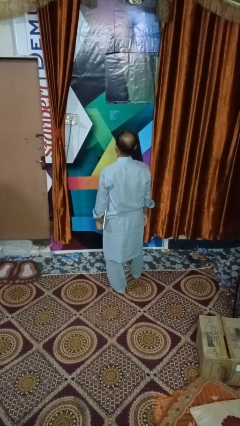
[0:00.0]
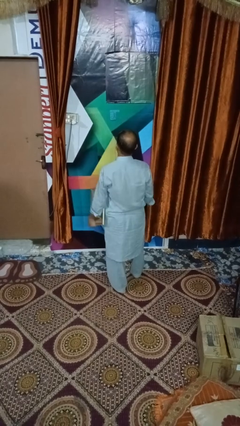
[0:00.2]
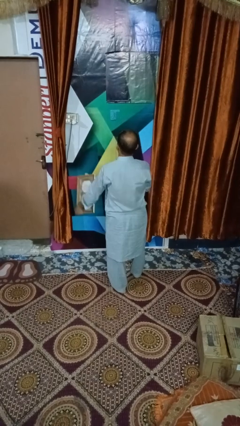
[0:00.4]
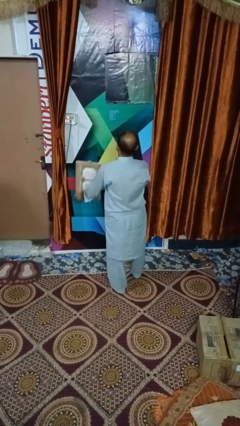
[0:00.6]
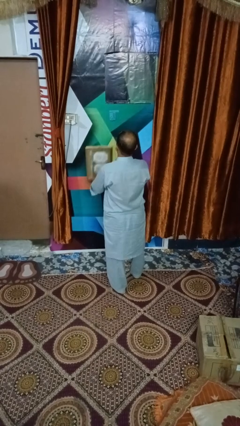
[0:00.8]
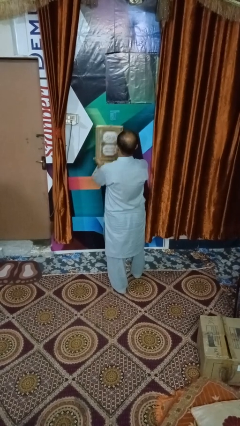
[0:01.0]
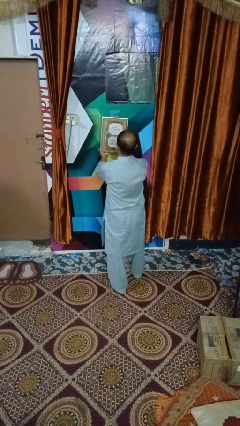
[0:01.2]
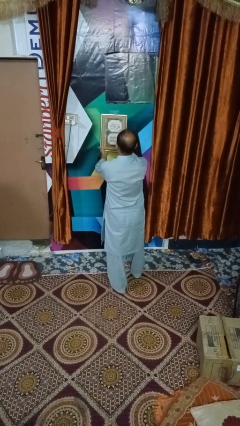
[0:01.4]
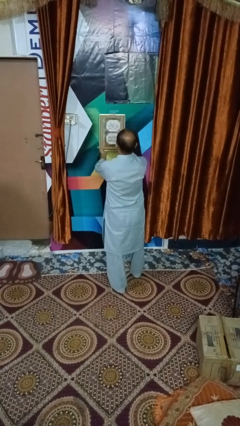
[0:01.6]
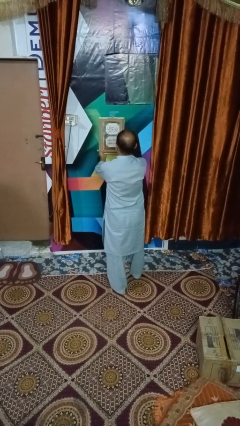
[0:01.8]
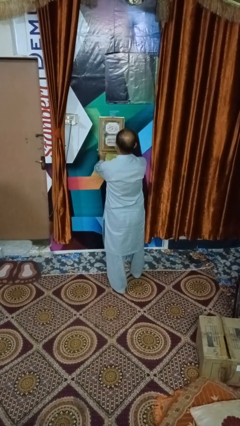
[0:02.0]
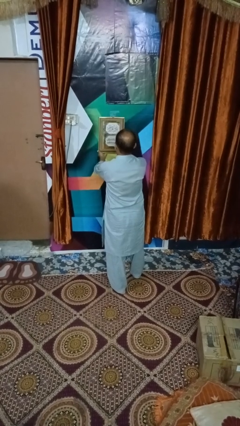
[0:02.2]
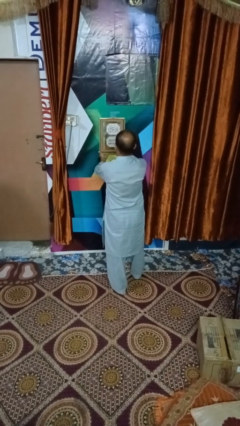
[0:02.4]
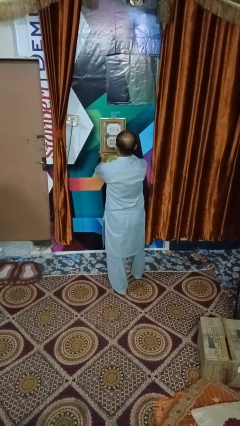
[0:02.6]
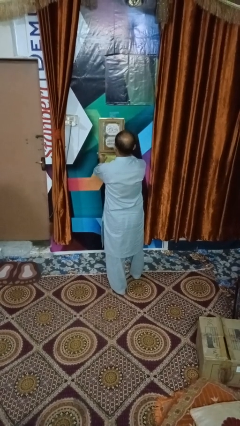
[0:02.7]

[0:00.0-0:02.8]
person puts up picture frame

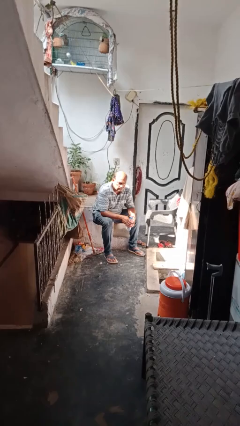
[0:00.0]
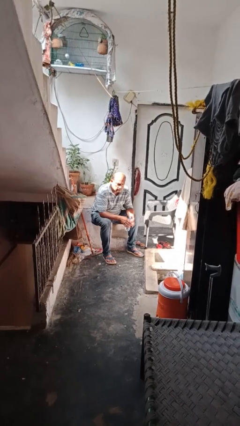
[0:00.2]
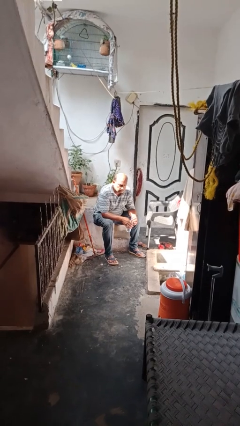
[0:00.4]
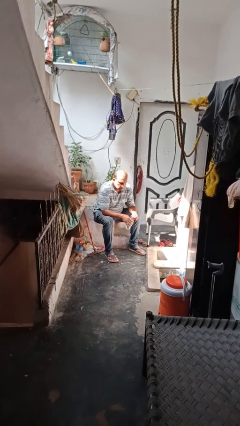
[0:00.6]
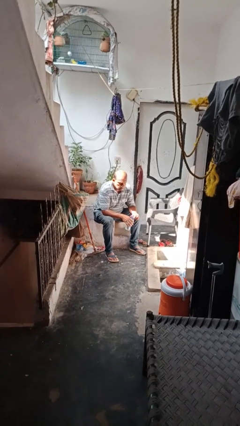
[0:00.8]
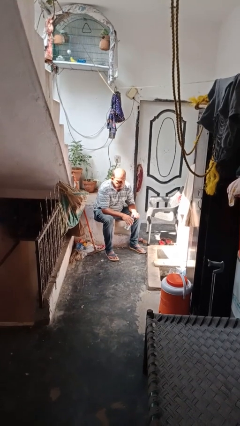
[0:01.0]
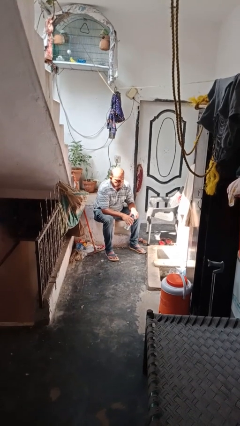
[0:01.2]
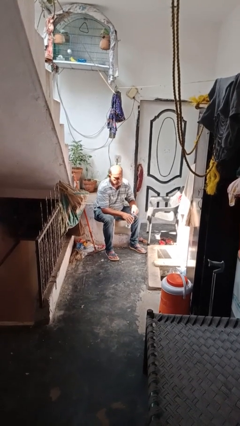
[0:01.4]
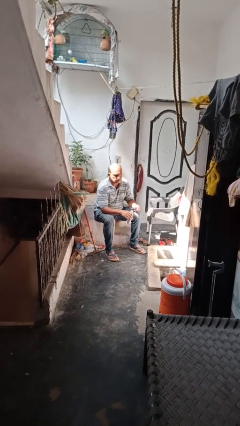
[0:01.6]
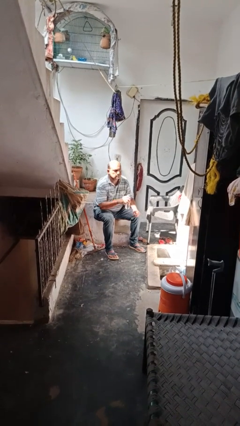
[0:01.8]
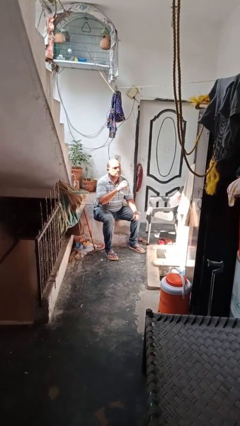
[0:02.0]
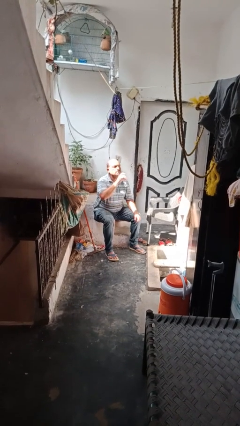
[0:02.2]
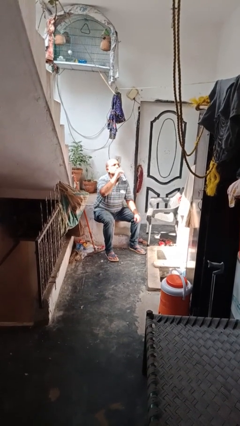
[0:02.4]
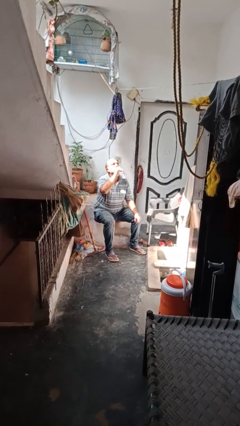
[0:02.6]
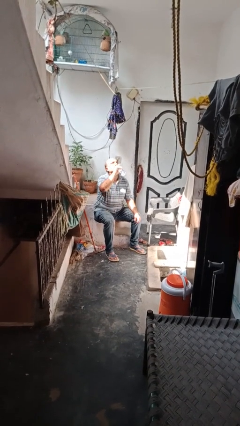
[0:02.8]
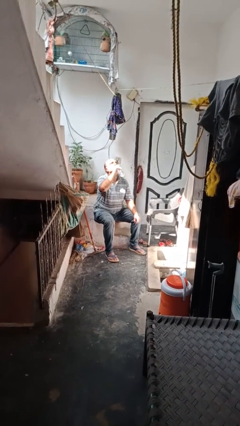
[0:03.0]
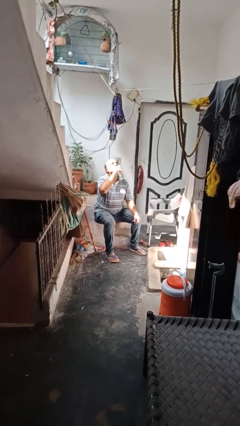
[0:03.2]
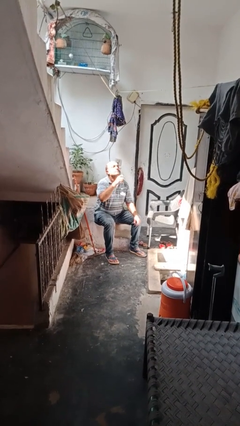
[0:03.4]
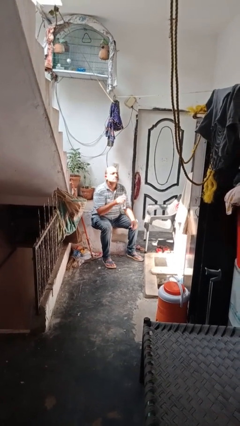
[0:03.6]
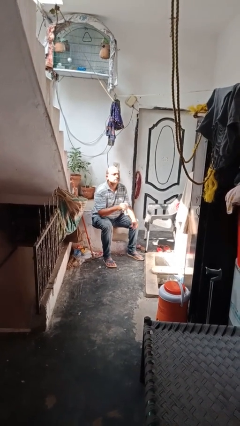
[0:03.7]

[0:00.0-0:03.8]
person drinks from bottle

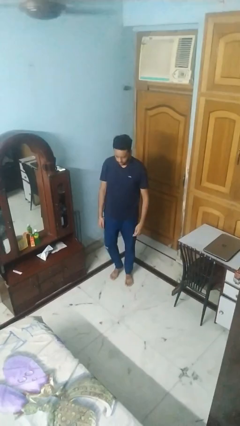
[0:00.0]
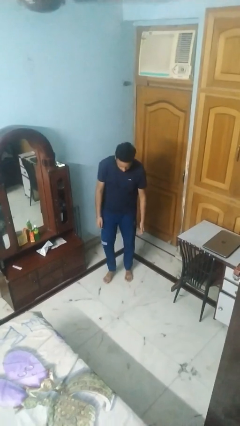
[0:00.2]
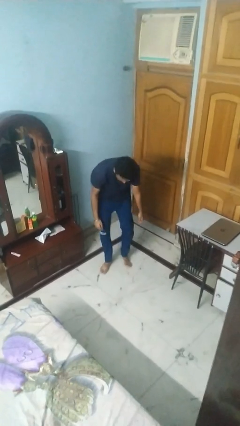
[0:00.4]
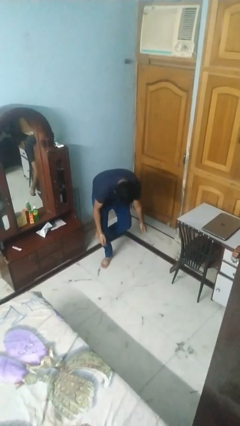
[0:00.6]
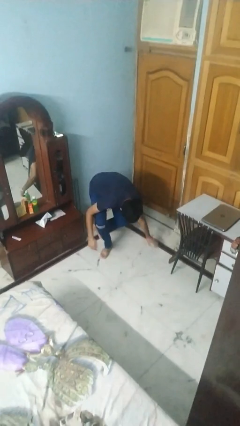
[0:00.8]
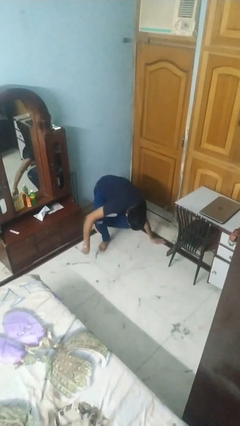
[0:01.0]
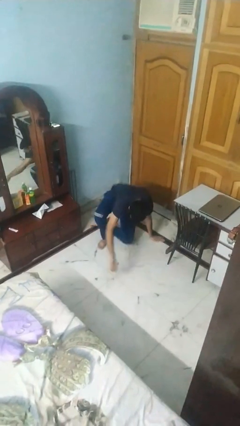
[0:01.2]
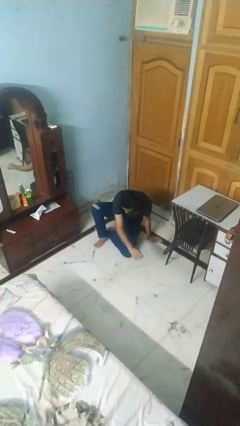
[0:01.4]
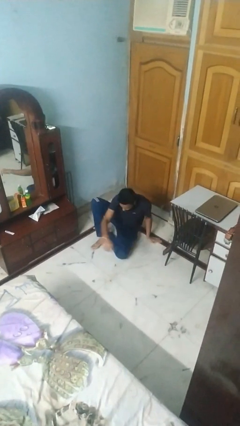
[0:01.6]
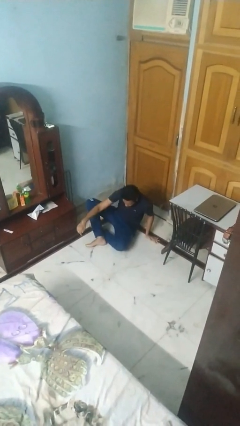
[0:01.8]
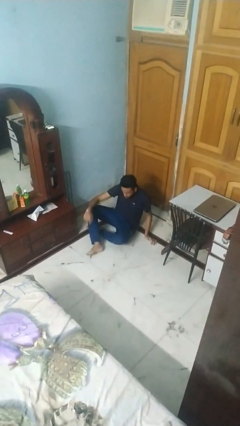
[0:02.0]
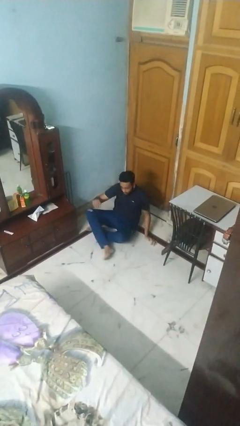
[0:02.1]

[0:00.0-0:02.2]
person sits crisscross

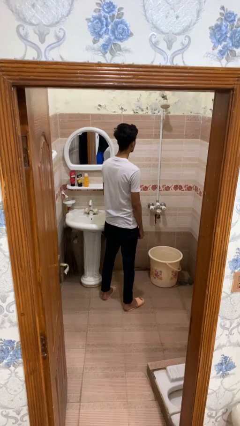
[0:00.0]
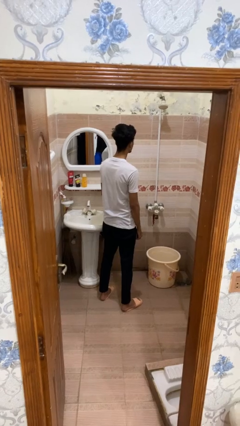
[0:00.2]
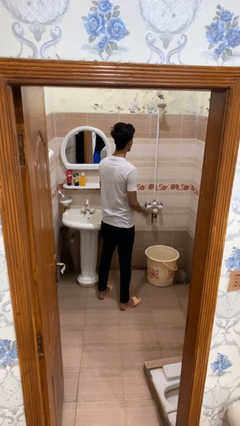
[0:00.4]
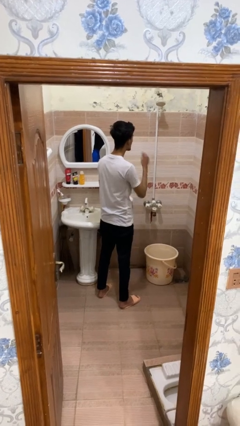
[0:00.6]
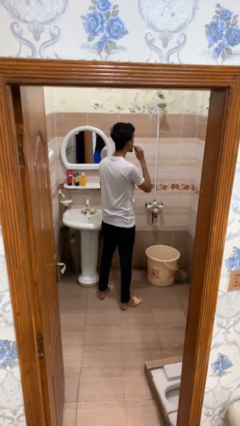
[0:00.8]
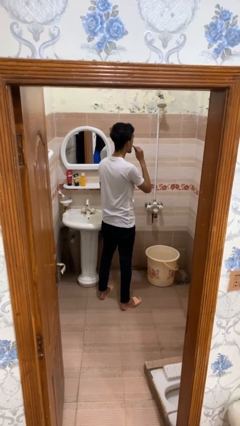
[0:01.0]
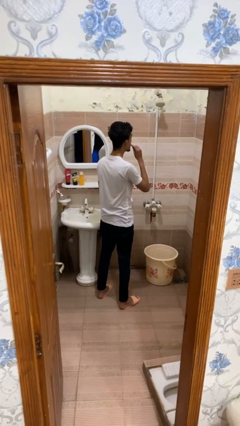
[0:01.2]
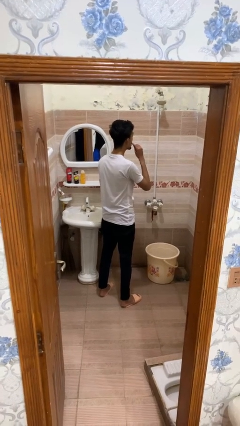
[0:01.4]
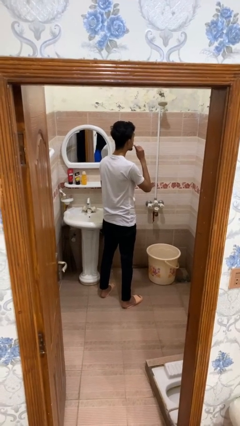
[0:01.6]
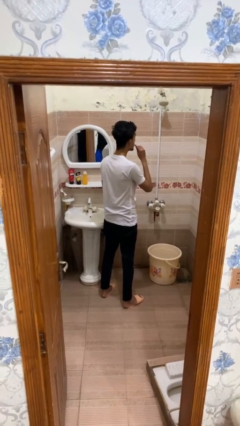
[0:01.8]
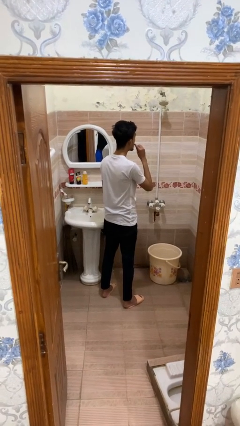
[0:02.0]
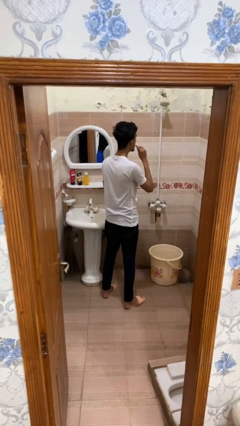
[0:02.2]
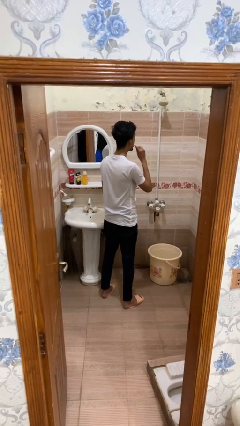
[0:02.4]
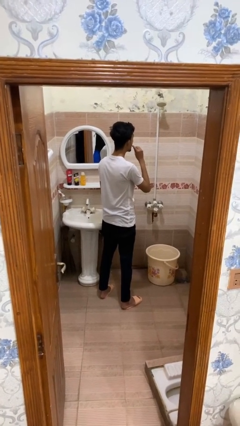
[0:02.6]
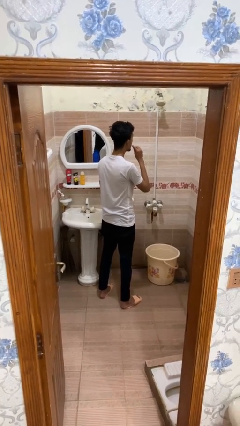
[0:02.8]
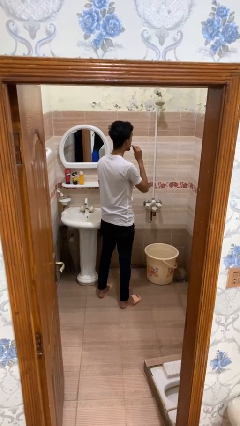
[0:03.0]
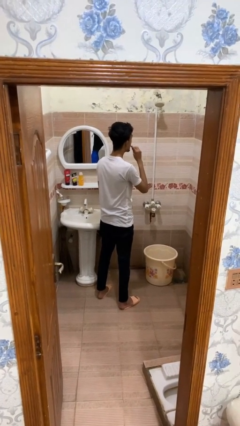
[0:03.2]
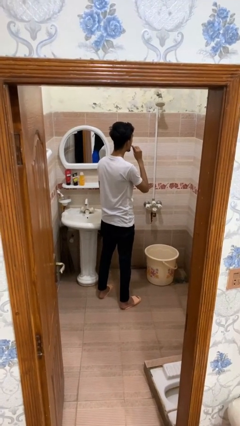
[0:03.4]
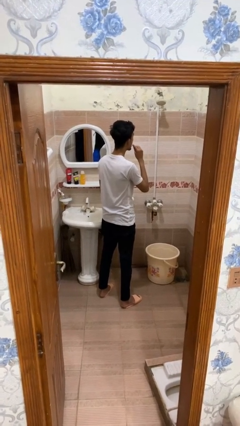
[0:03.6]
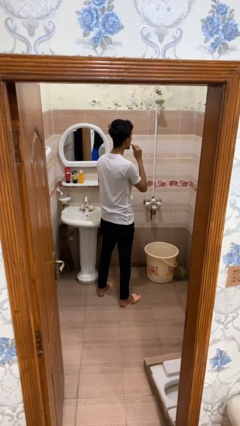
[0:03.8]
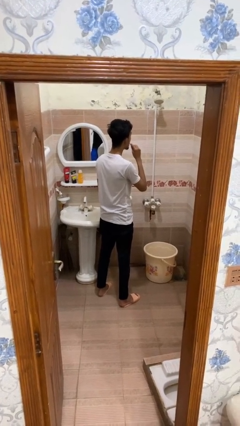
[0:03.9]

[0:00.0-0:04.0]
person flosses

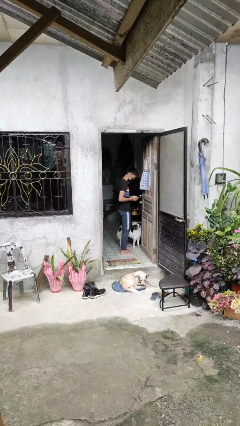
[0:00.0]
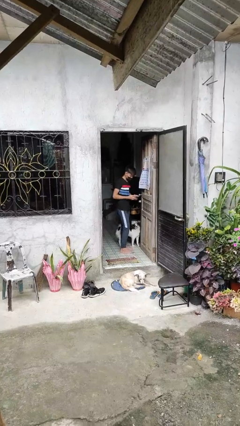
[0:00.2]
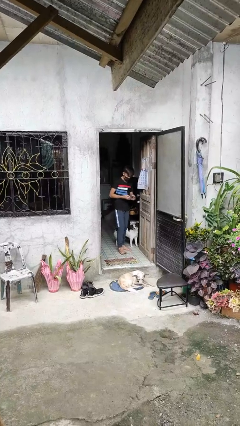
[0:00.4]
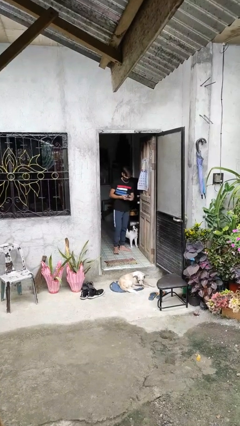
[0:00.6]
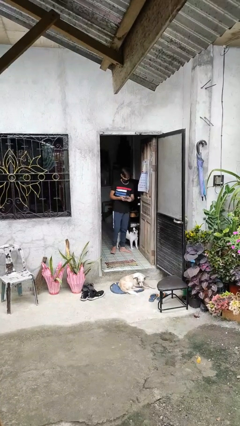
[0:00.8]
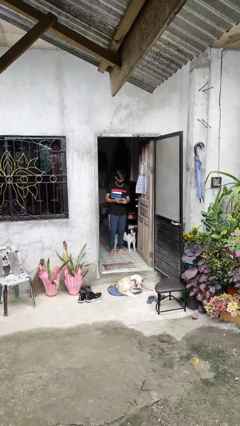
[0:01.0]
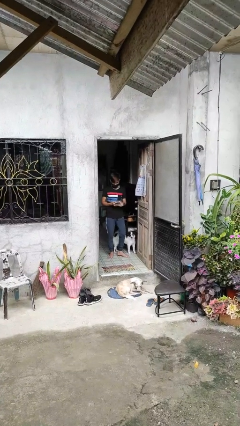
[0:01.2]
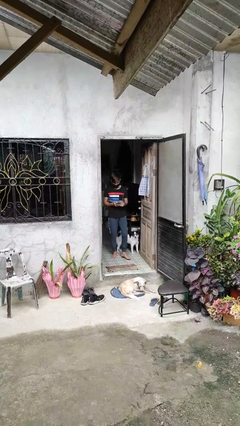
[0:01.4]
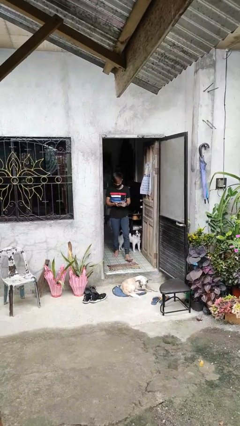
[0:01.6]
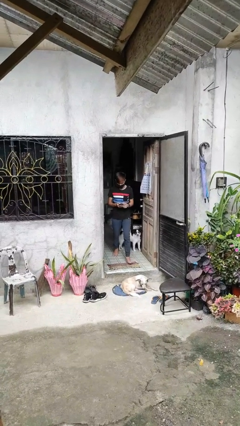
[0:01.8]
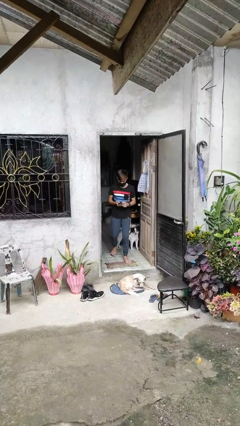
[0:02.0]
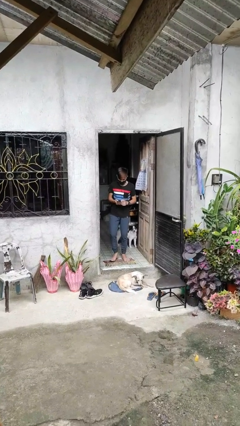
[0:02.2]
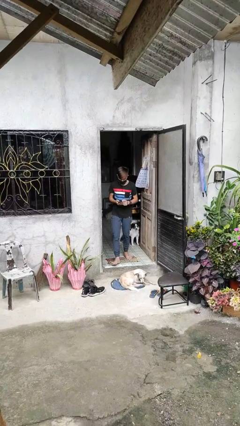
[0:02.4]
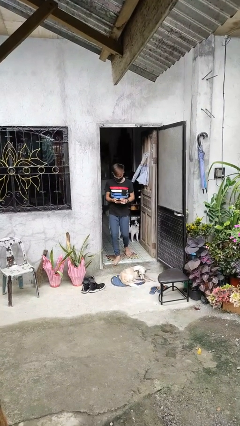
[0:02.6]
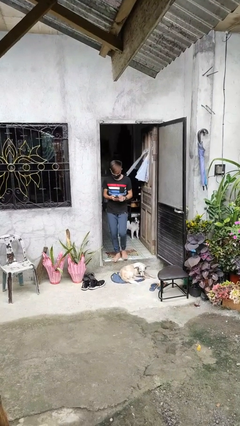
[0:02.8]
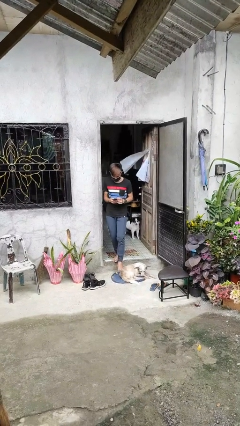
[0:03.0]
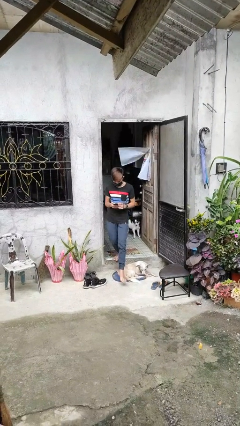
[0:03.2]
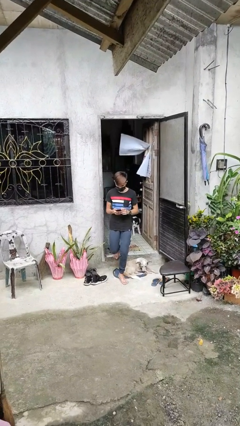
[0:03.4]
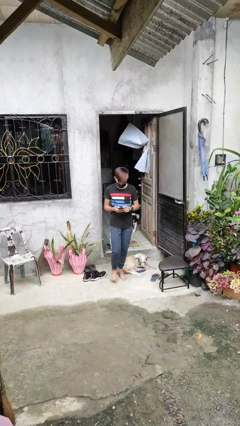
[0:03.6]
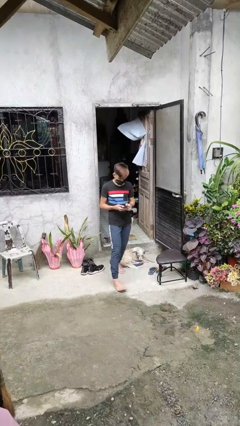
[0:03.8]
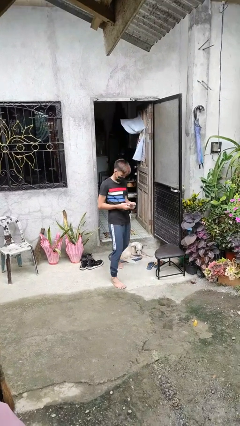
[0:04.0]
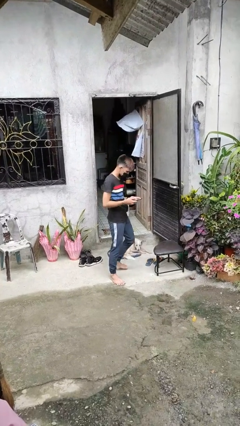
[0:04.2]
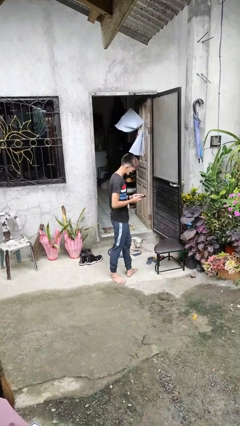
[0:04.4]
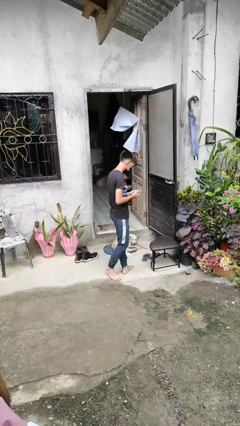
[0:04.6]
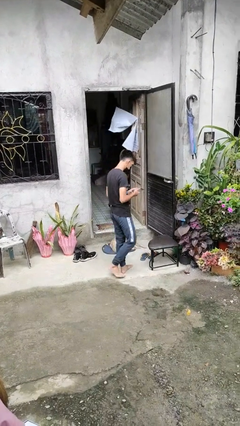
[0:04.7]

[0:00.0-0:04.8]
person enters scene through structure

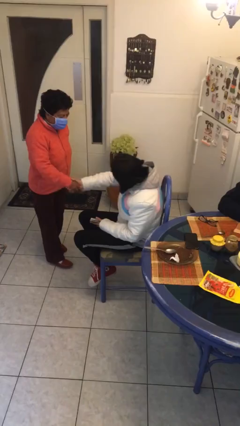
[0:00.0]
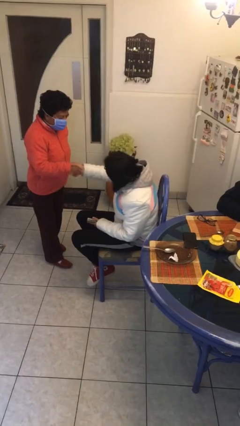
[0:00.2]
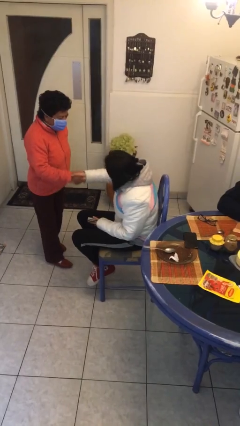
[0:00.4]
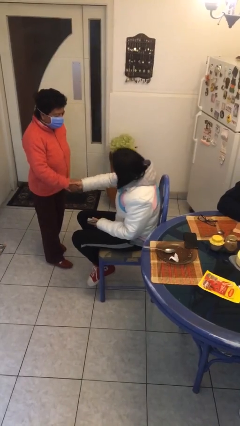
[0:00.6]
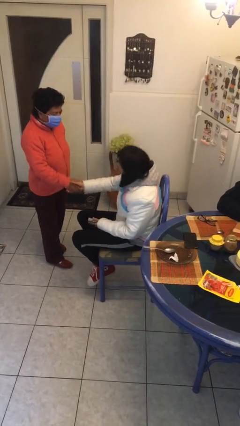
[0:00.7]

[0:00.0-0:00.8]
person shakes hand
